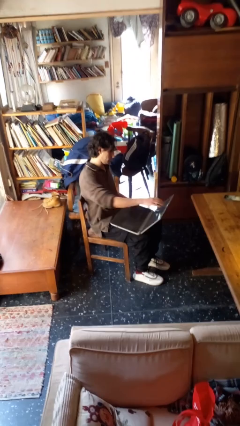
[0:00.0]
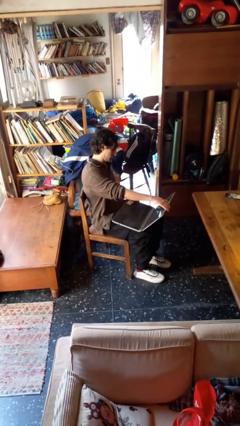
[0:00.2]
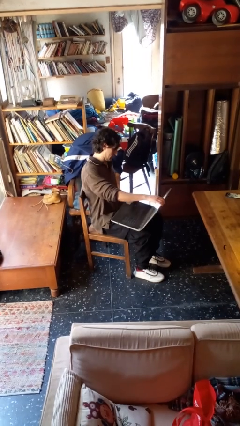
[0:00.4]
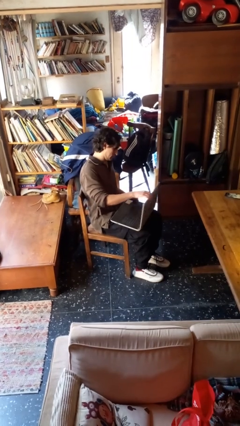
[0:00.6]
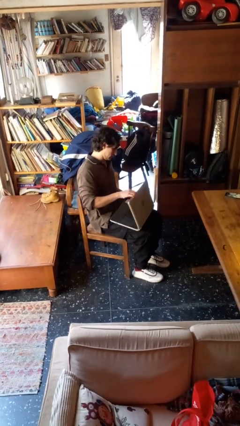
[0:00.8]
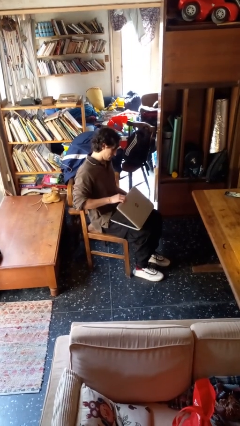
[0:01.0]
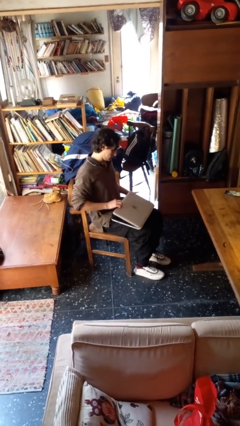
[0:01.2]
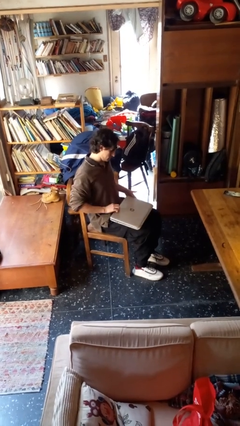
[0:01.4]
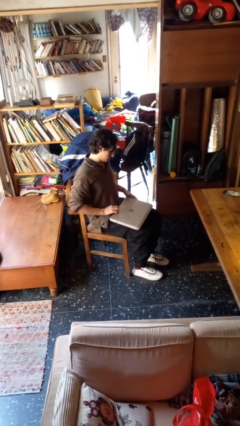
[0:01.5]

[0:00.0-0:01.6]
person closes laptop

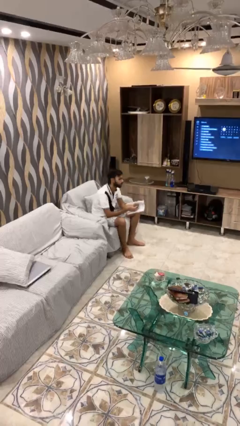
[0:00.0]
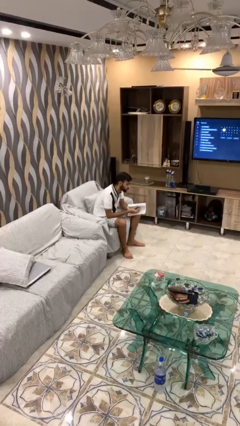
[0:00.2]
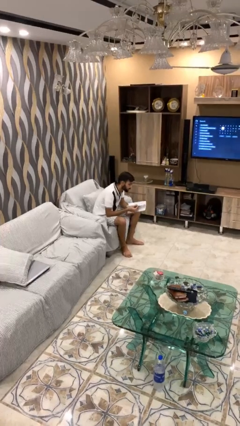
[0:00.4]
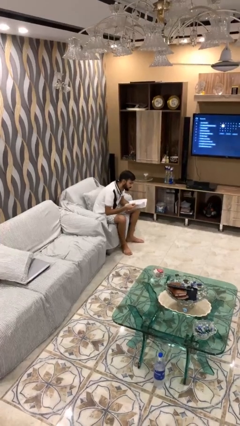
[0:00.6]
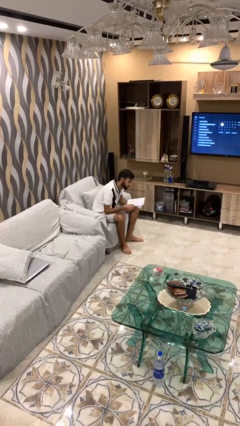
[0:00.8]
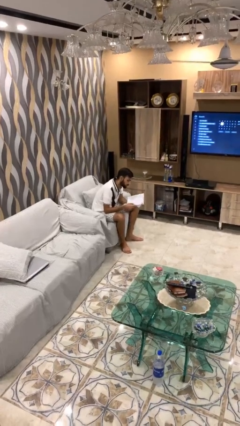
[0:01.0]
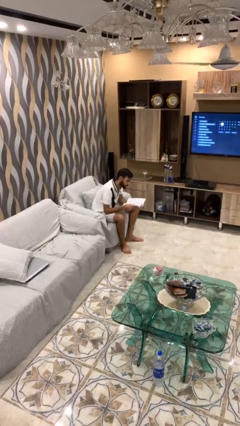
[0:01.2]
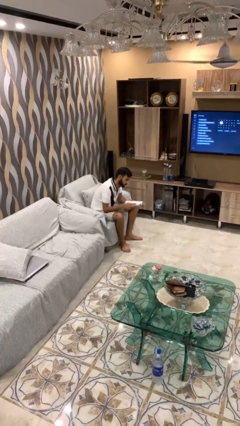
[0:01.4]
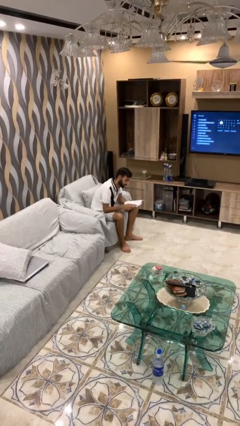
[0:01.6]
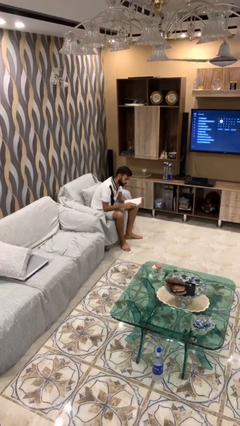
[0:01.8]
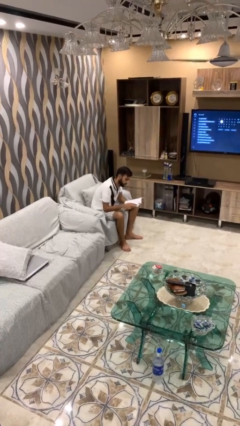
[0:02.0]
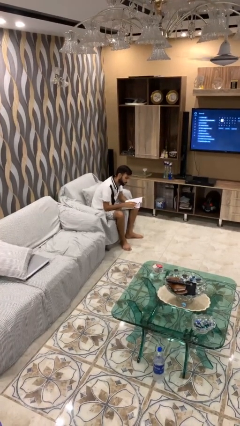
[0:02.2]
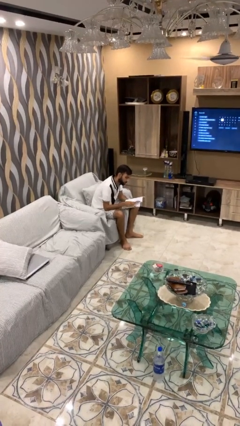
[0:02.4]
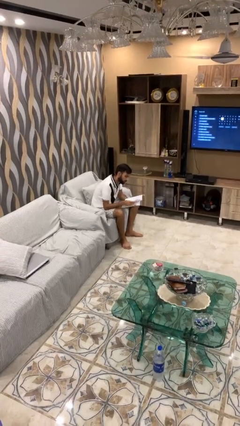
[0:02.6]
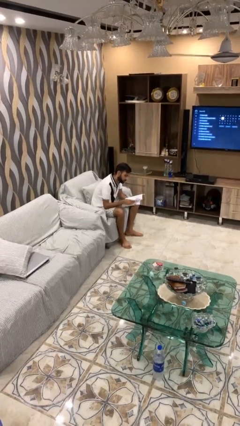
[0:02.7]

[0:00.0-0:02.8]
person reads document

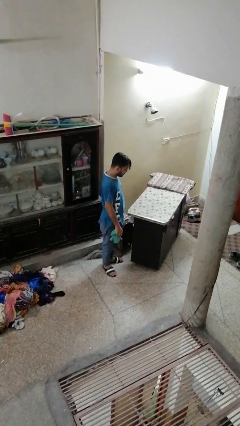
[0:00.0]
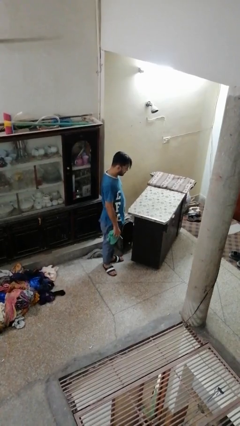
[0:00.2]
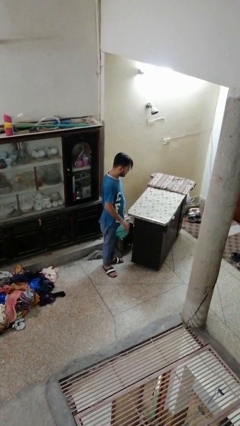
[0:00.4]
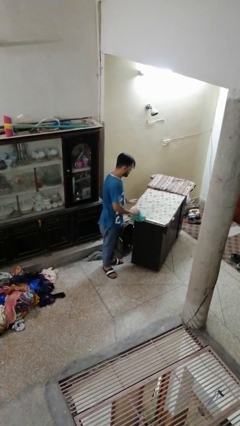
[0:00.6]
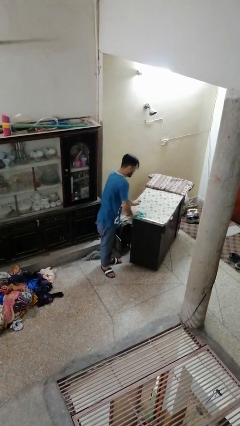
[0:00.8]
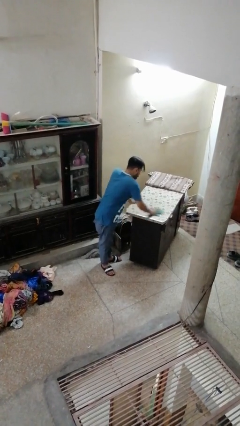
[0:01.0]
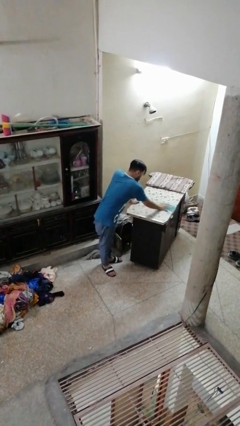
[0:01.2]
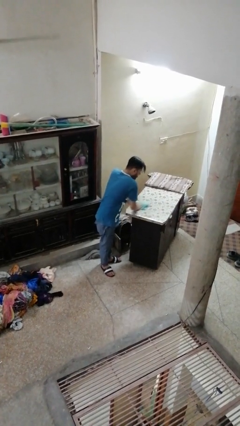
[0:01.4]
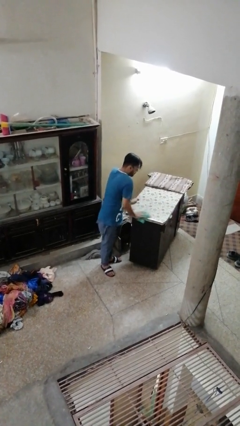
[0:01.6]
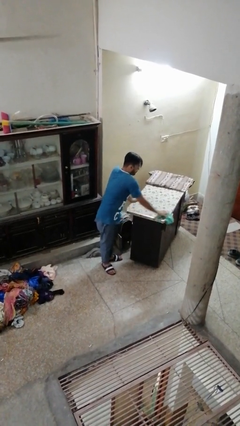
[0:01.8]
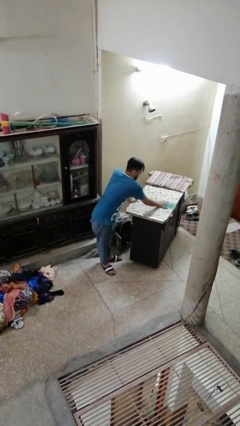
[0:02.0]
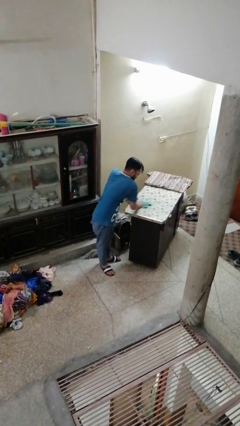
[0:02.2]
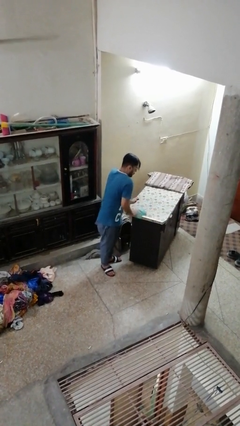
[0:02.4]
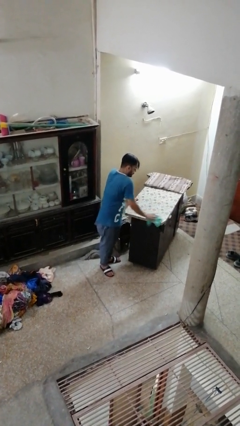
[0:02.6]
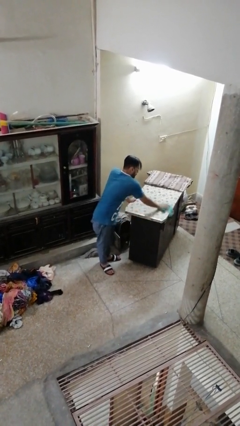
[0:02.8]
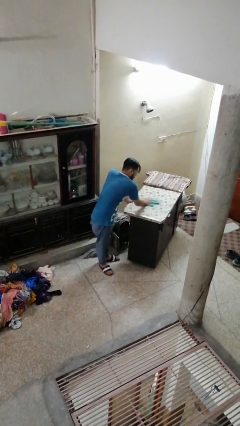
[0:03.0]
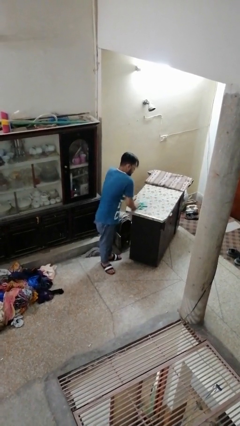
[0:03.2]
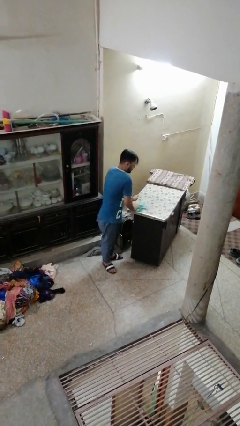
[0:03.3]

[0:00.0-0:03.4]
person cleans table with rag

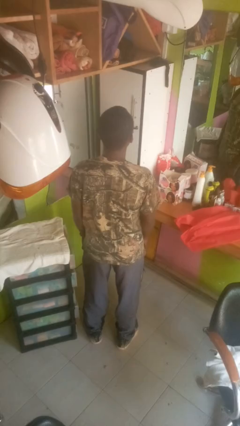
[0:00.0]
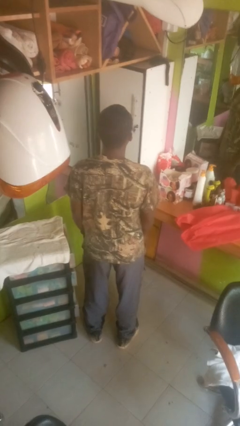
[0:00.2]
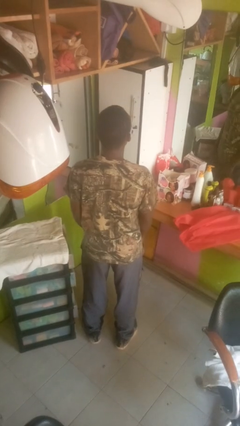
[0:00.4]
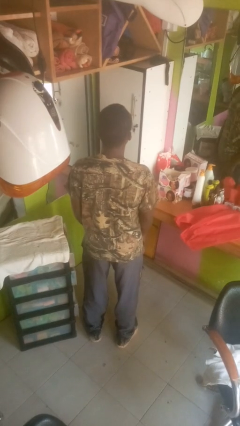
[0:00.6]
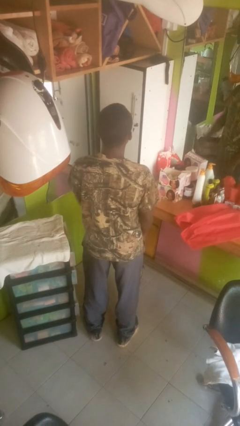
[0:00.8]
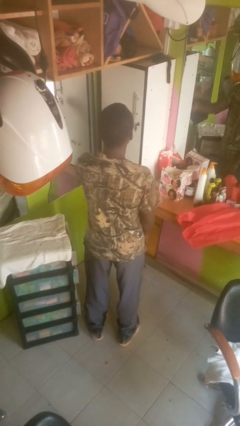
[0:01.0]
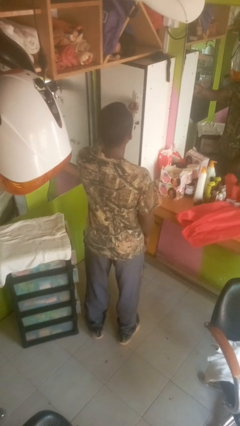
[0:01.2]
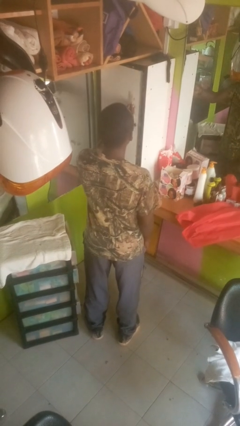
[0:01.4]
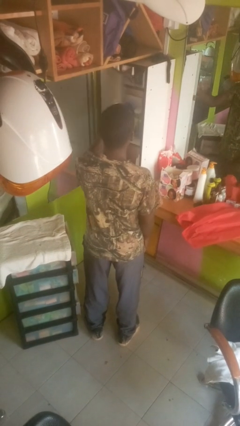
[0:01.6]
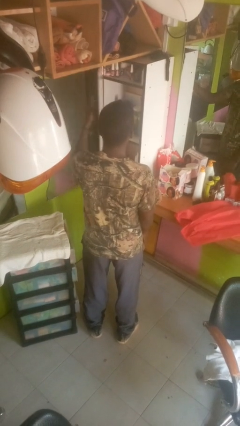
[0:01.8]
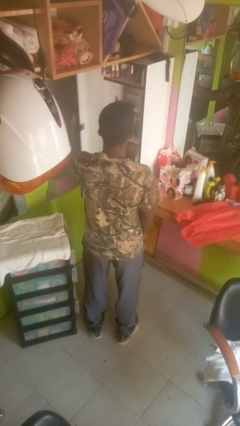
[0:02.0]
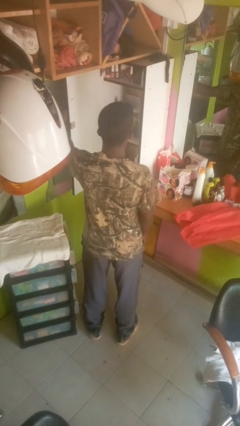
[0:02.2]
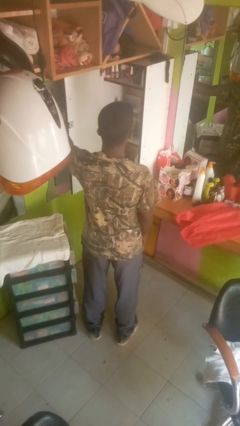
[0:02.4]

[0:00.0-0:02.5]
person opens closet door

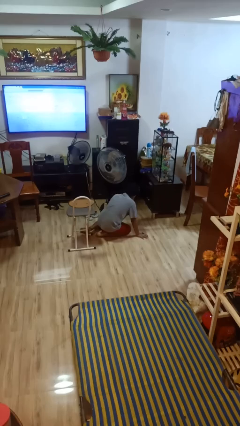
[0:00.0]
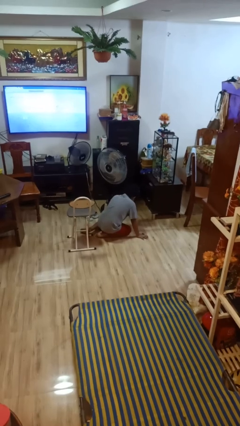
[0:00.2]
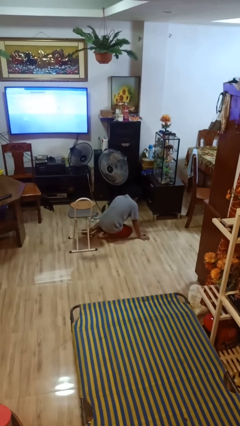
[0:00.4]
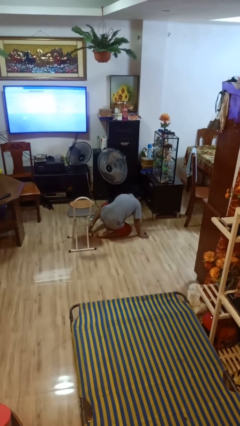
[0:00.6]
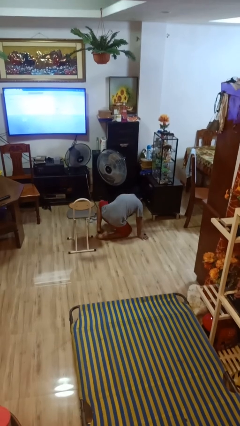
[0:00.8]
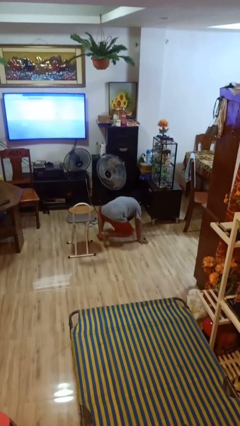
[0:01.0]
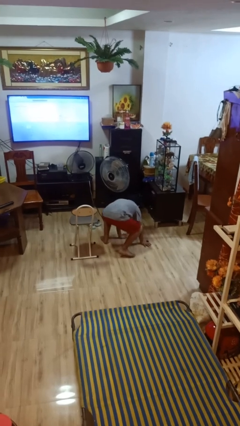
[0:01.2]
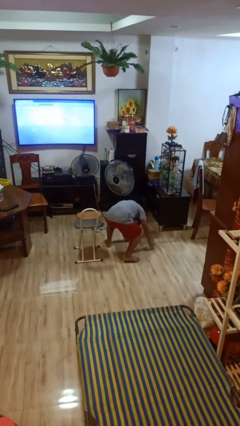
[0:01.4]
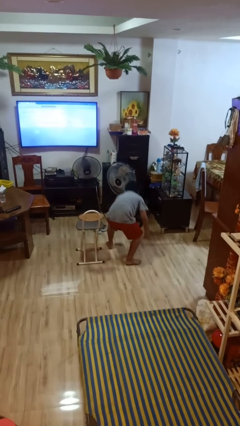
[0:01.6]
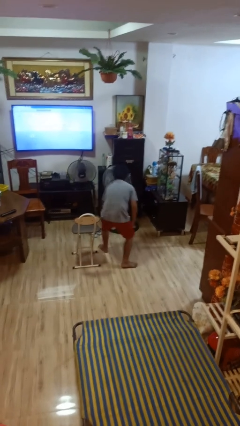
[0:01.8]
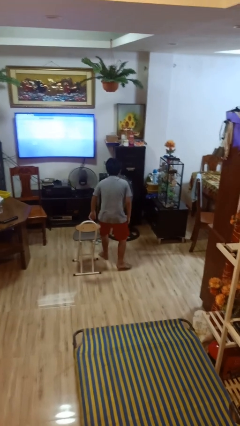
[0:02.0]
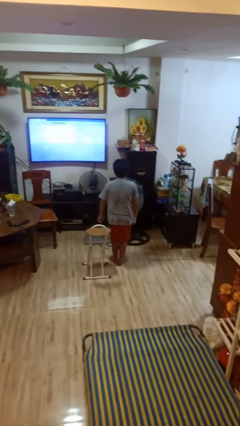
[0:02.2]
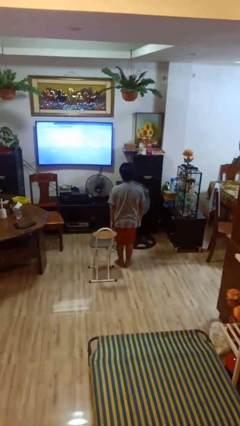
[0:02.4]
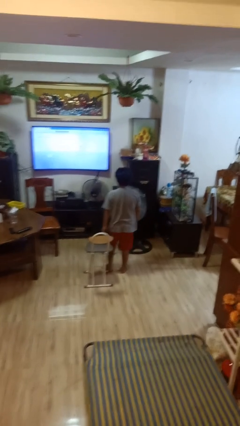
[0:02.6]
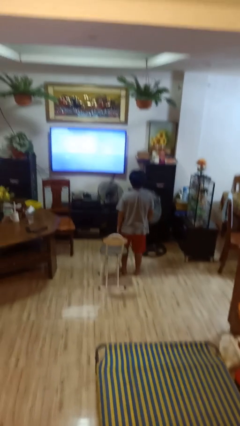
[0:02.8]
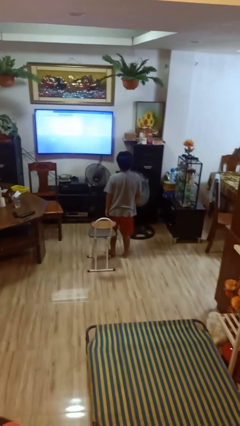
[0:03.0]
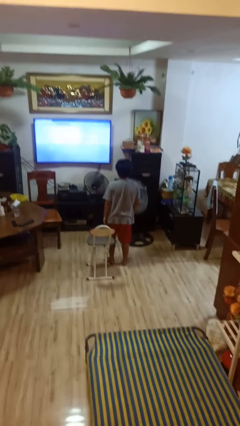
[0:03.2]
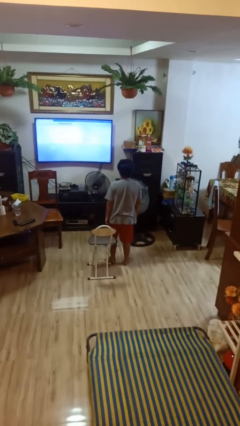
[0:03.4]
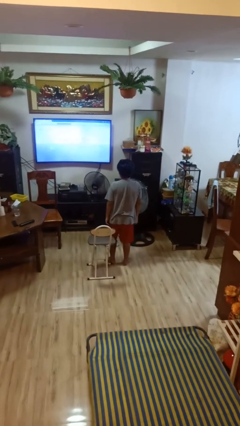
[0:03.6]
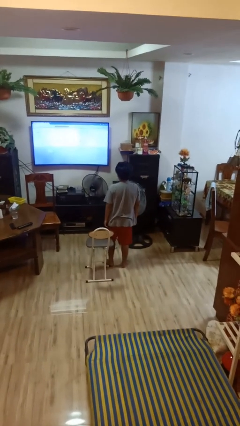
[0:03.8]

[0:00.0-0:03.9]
person stands up from floor

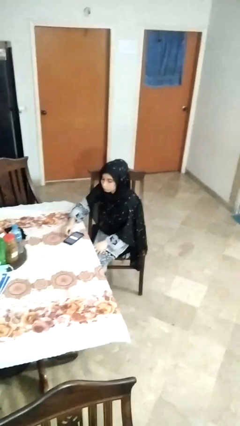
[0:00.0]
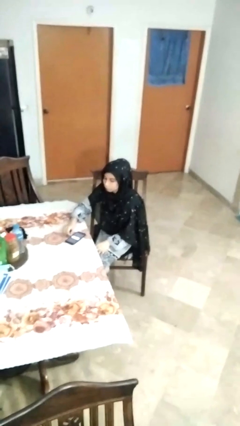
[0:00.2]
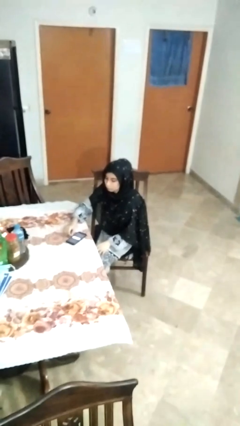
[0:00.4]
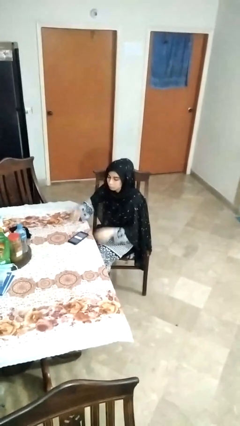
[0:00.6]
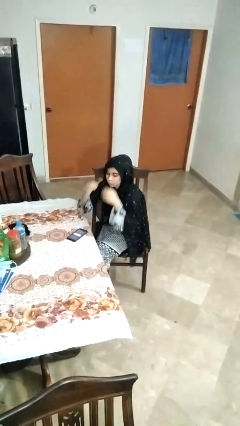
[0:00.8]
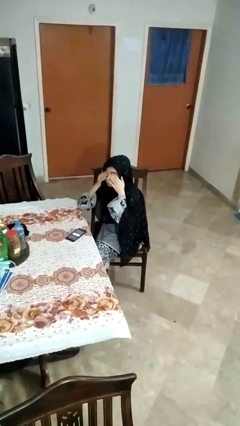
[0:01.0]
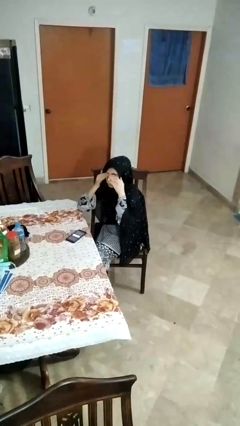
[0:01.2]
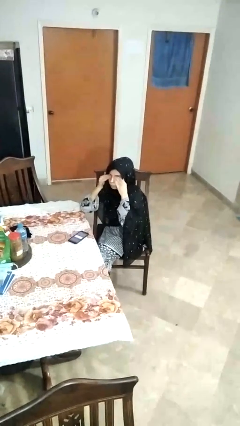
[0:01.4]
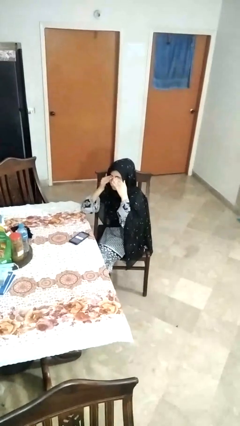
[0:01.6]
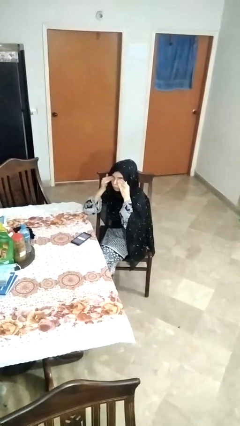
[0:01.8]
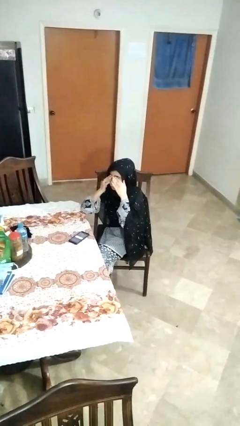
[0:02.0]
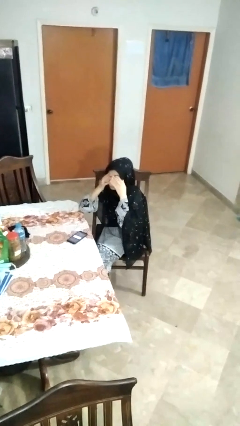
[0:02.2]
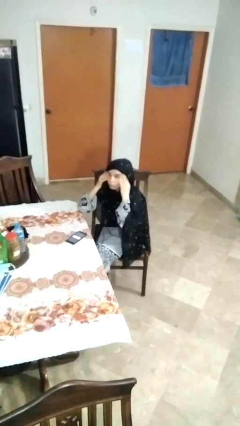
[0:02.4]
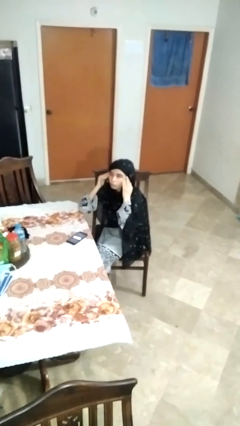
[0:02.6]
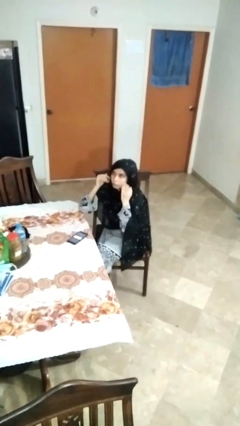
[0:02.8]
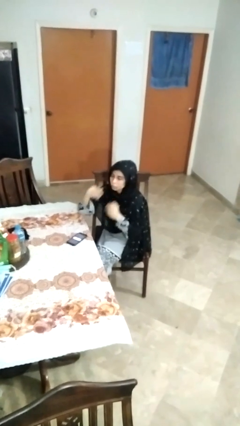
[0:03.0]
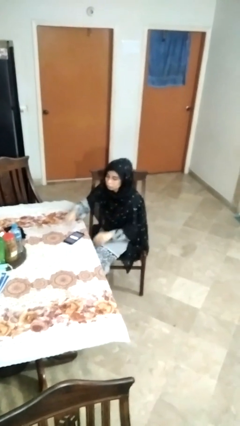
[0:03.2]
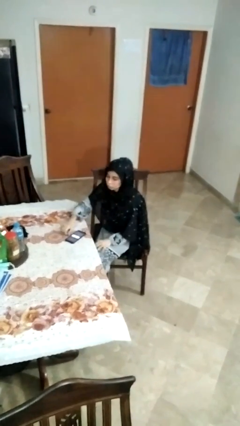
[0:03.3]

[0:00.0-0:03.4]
person rubs eyes
